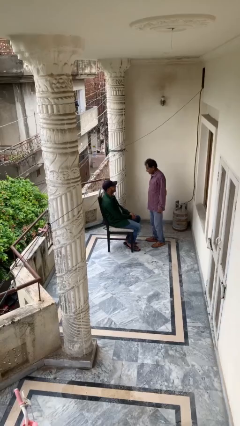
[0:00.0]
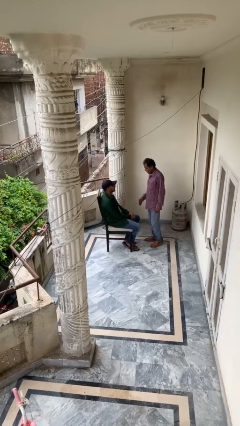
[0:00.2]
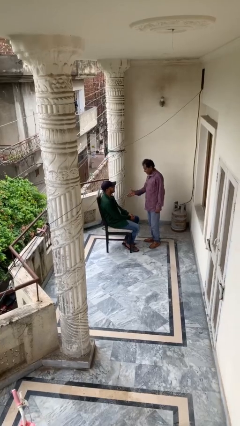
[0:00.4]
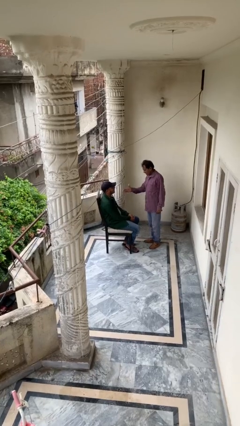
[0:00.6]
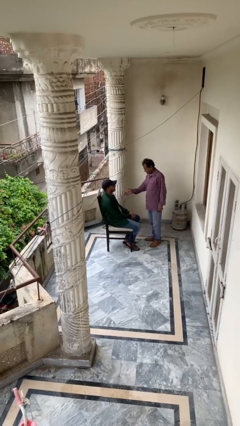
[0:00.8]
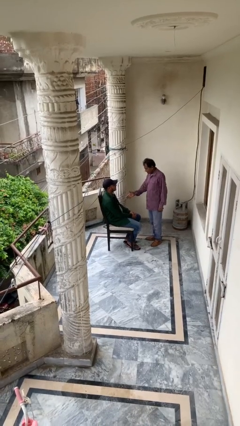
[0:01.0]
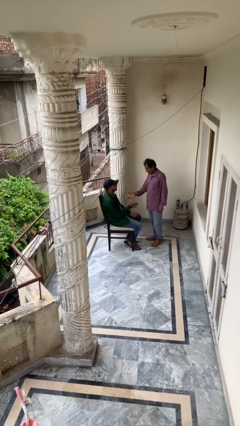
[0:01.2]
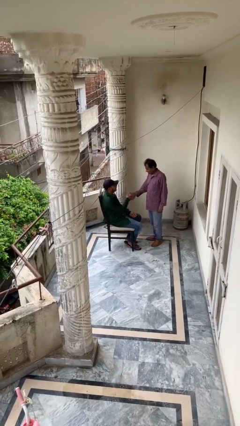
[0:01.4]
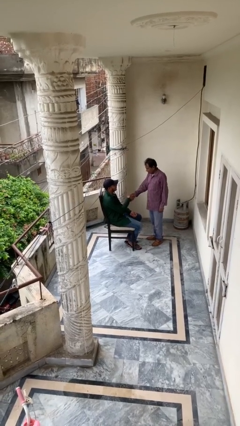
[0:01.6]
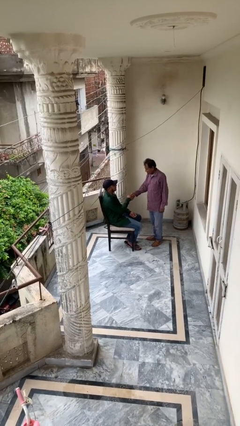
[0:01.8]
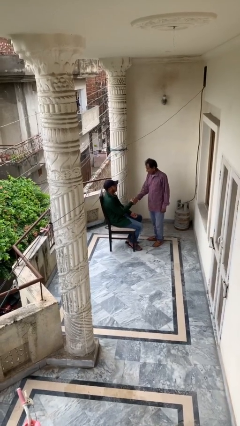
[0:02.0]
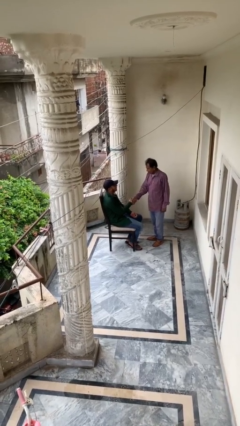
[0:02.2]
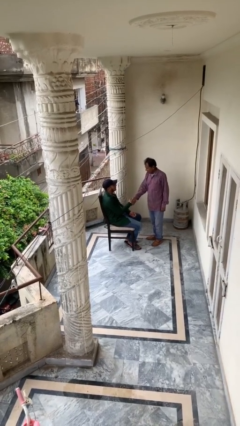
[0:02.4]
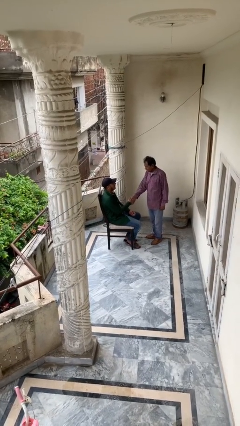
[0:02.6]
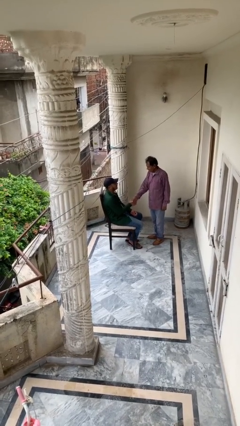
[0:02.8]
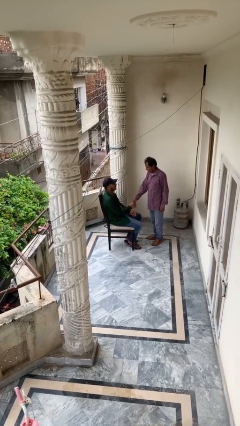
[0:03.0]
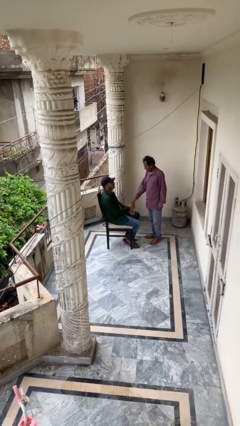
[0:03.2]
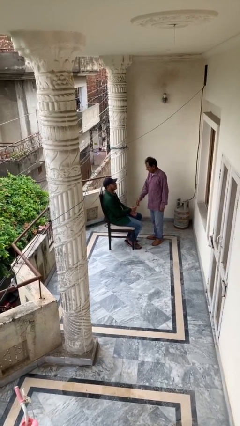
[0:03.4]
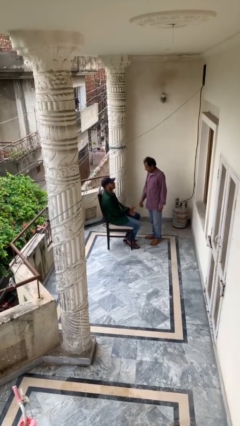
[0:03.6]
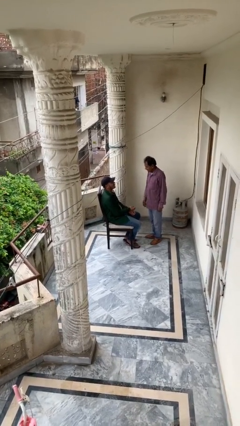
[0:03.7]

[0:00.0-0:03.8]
person shakes hand

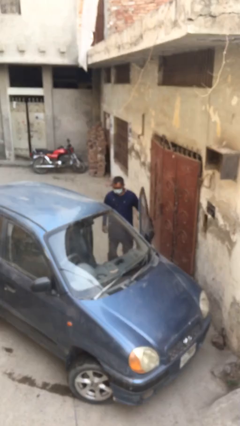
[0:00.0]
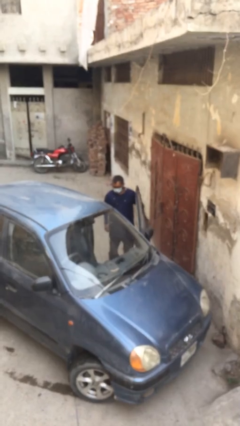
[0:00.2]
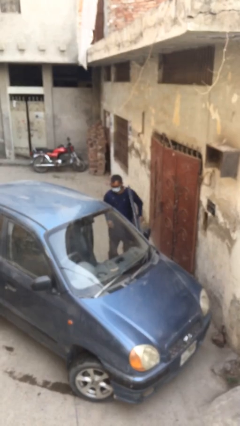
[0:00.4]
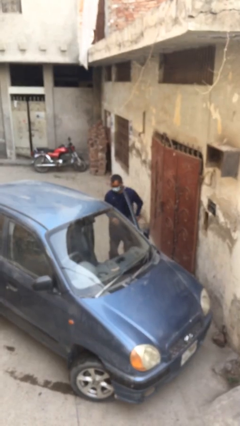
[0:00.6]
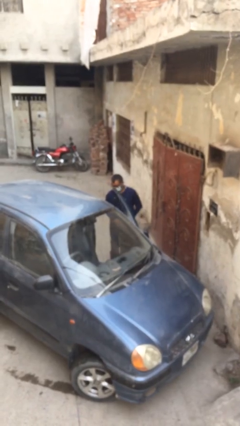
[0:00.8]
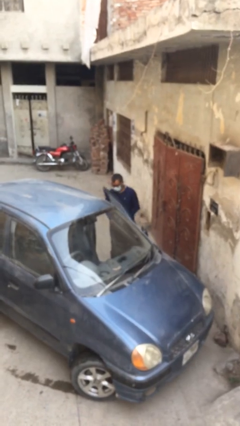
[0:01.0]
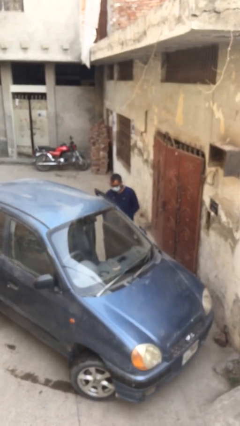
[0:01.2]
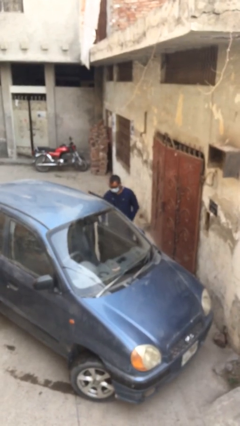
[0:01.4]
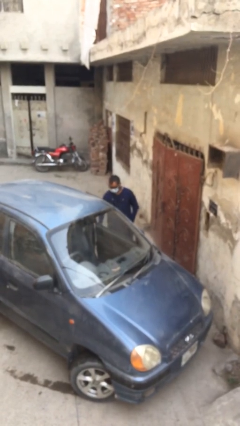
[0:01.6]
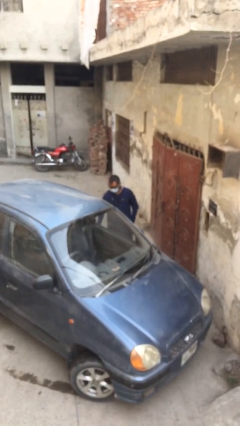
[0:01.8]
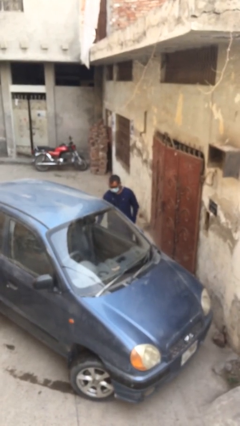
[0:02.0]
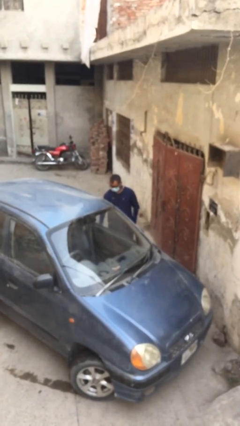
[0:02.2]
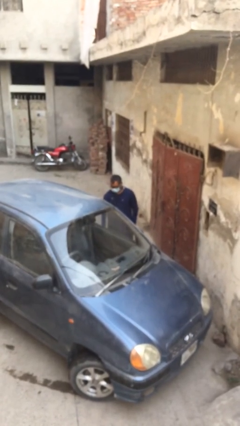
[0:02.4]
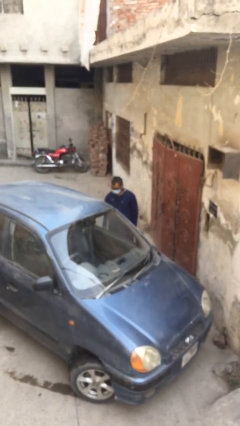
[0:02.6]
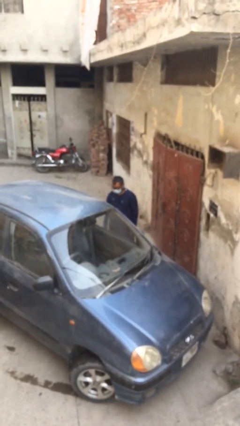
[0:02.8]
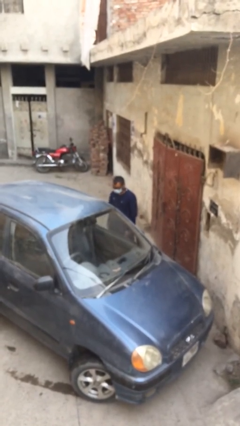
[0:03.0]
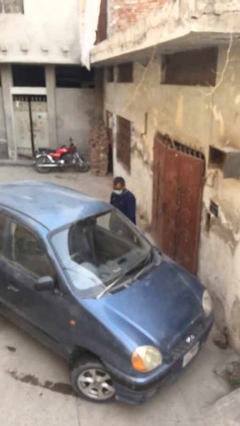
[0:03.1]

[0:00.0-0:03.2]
person closes car door

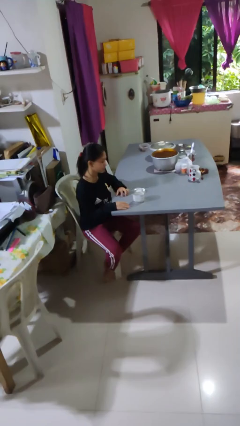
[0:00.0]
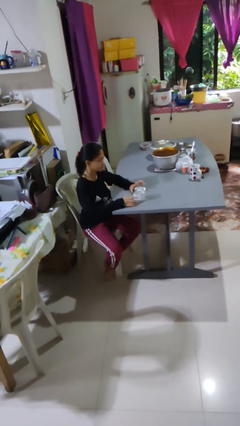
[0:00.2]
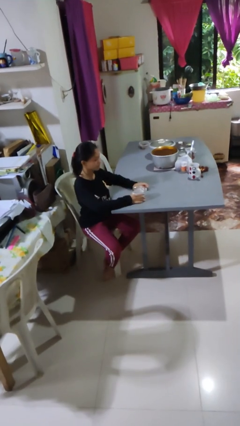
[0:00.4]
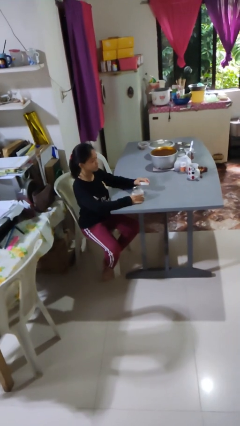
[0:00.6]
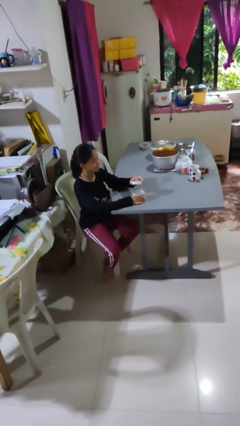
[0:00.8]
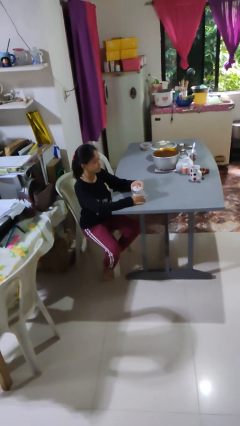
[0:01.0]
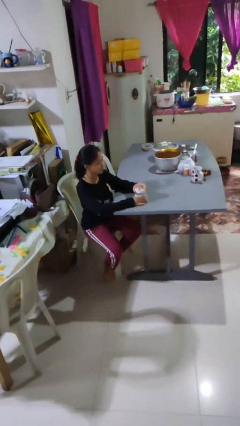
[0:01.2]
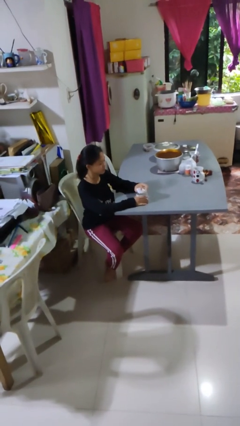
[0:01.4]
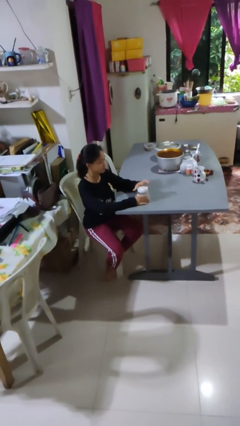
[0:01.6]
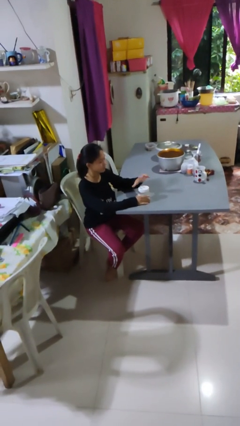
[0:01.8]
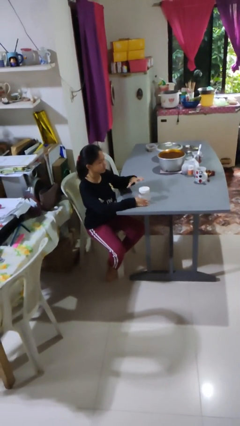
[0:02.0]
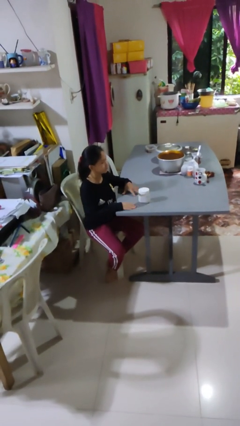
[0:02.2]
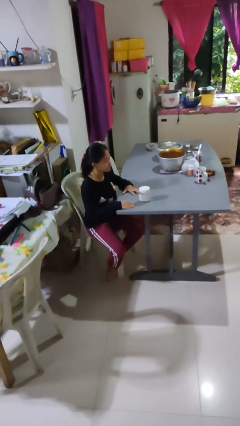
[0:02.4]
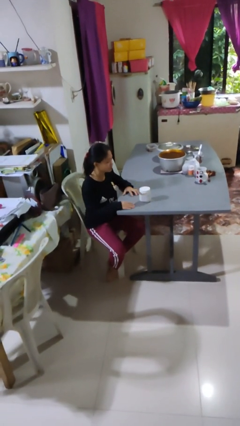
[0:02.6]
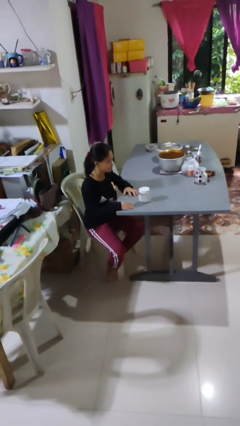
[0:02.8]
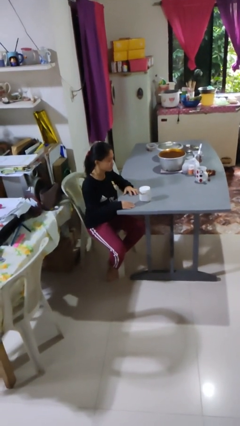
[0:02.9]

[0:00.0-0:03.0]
person closes jar

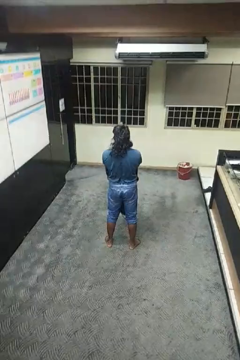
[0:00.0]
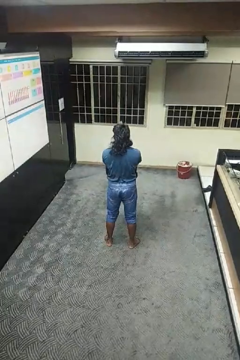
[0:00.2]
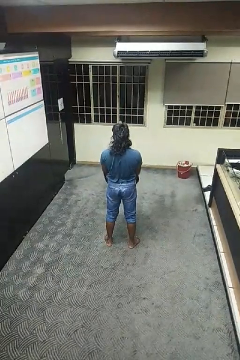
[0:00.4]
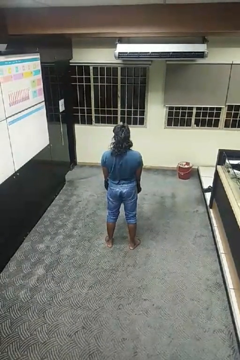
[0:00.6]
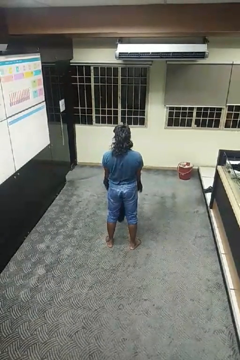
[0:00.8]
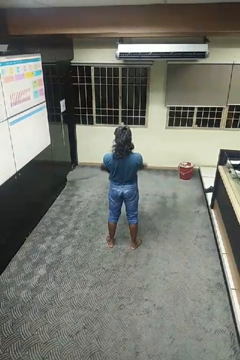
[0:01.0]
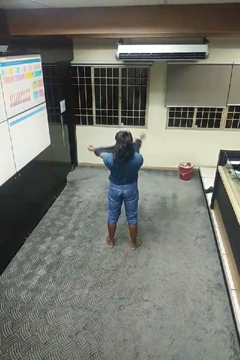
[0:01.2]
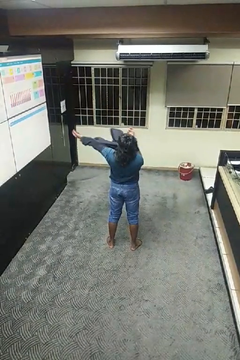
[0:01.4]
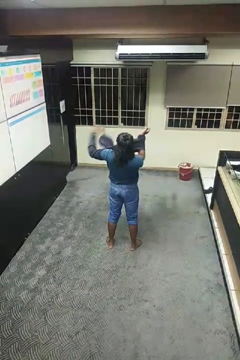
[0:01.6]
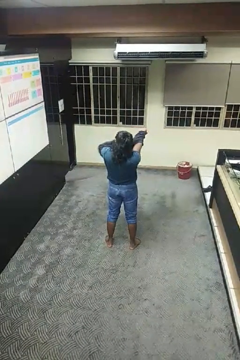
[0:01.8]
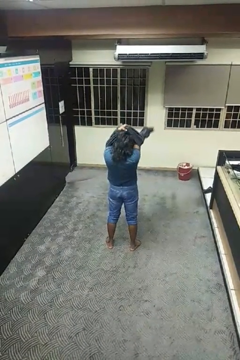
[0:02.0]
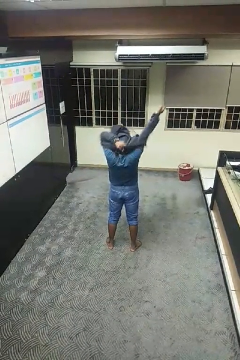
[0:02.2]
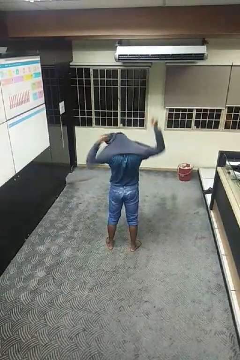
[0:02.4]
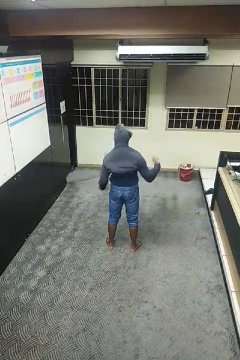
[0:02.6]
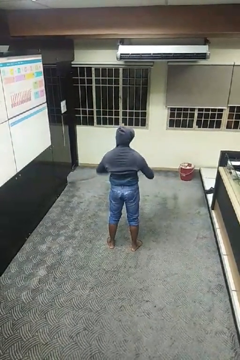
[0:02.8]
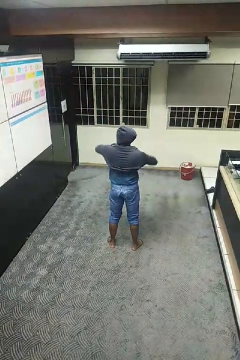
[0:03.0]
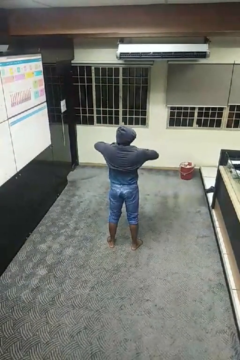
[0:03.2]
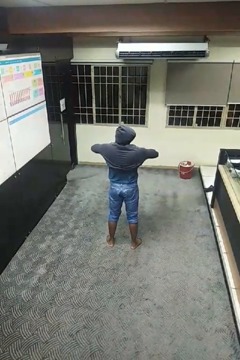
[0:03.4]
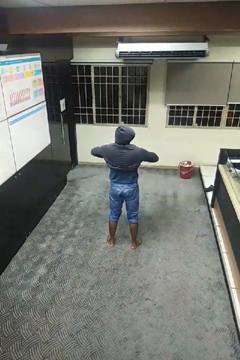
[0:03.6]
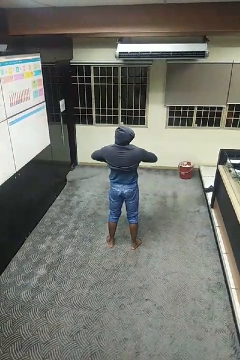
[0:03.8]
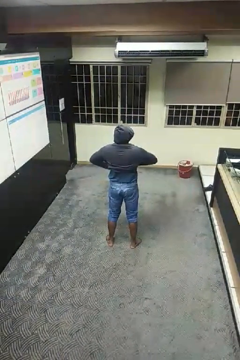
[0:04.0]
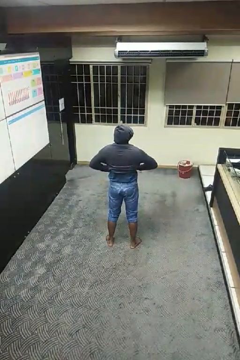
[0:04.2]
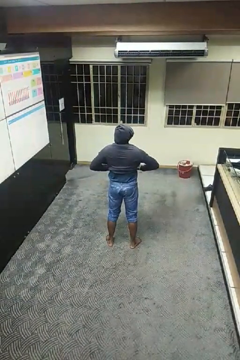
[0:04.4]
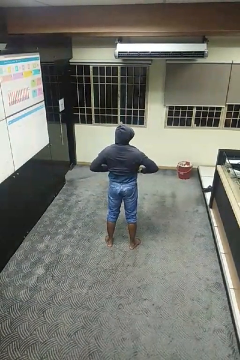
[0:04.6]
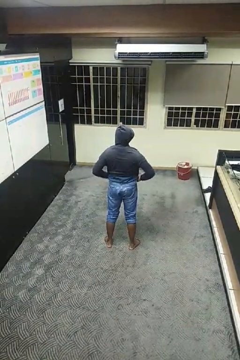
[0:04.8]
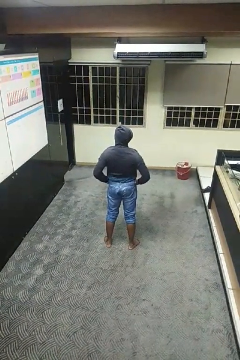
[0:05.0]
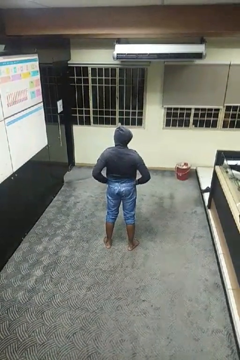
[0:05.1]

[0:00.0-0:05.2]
person puts on hoodie

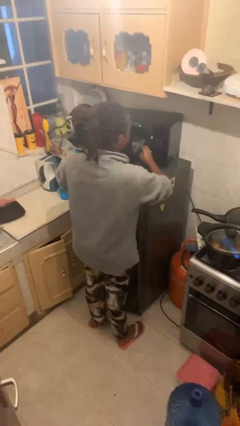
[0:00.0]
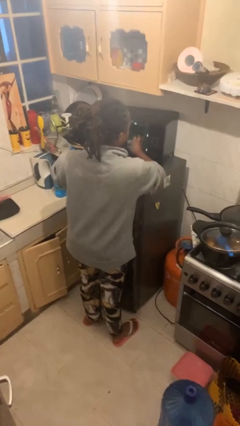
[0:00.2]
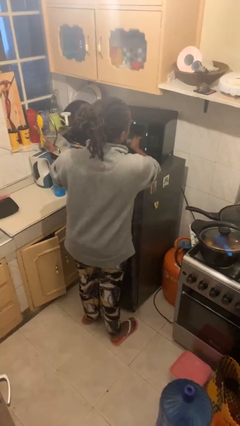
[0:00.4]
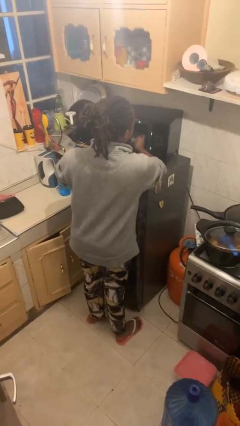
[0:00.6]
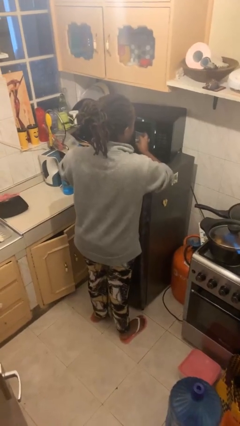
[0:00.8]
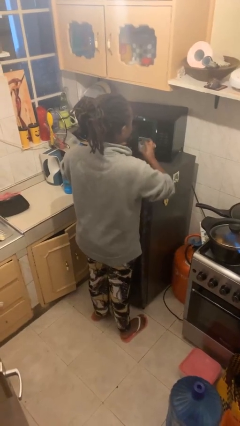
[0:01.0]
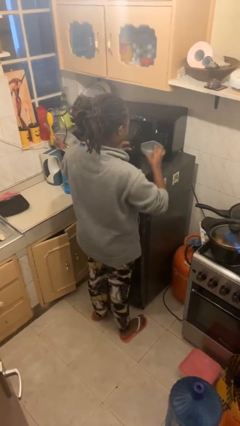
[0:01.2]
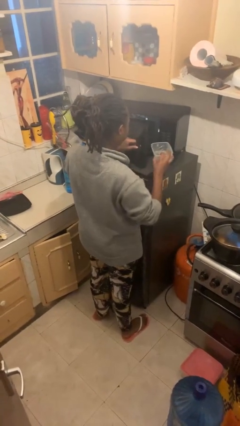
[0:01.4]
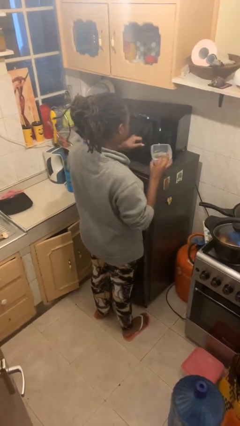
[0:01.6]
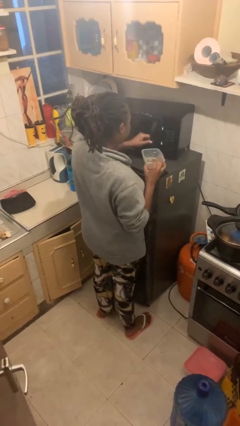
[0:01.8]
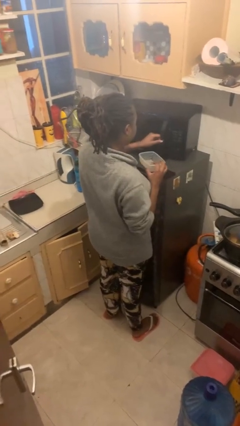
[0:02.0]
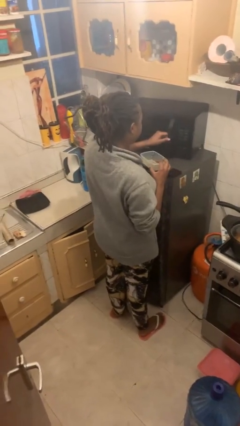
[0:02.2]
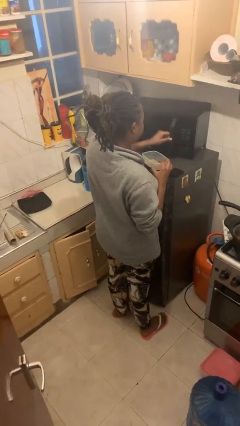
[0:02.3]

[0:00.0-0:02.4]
person takes object from microwave

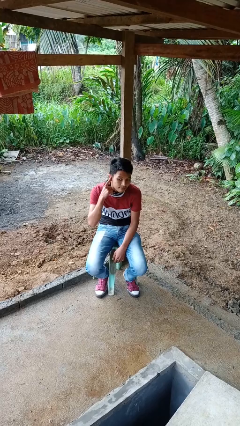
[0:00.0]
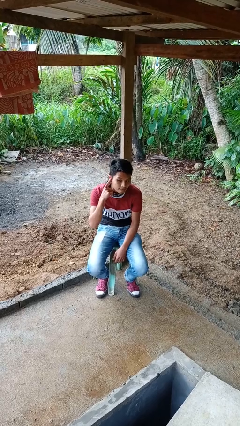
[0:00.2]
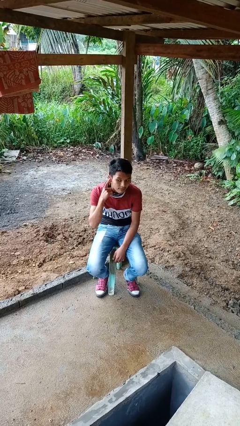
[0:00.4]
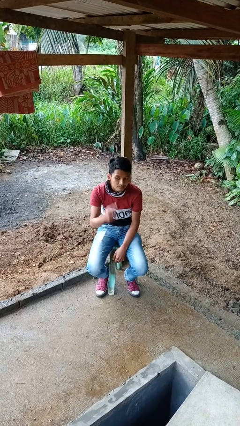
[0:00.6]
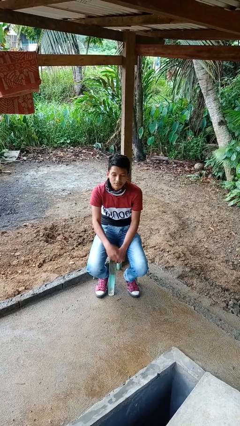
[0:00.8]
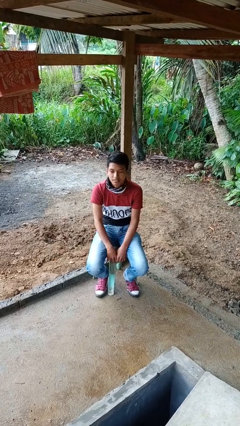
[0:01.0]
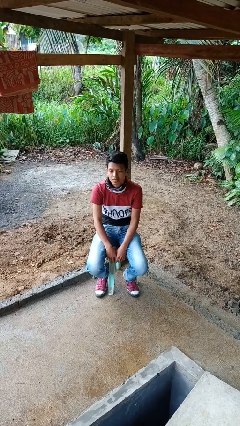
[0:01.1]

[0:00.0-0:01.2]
person gestures listen closely
